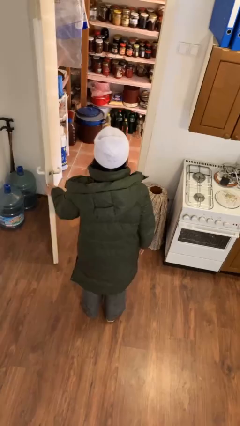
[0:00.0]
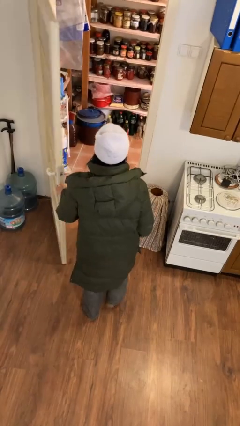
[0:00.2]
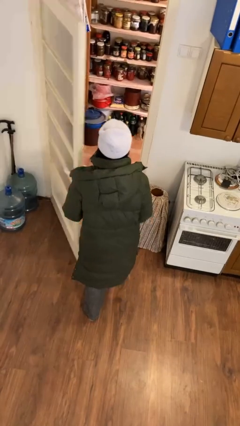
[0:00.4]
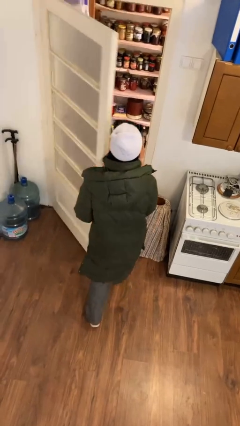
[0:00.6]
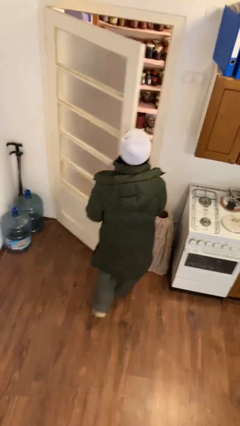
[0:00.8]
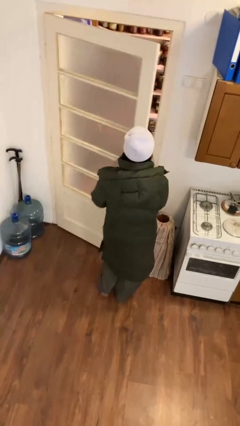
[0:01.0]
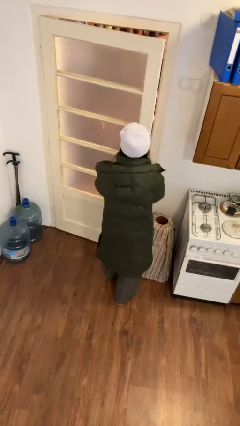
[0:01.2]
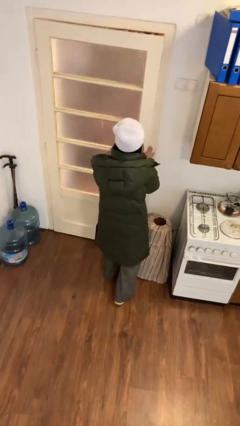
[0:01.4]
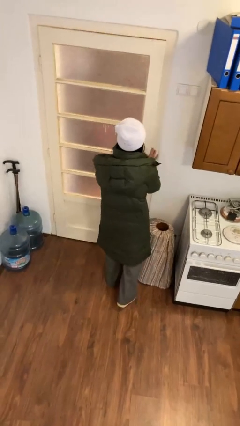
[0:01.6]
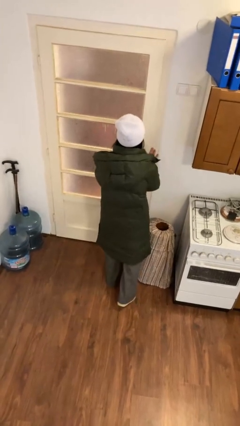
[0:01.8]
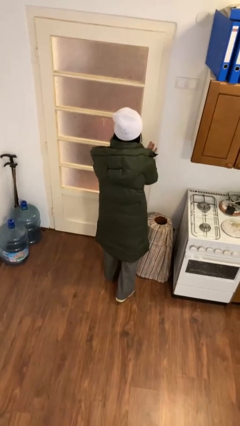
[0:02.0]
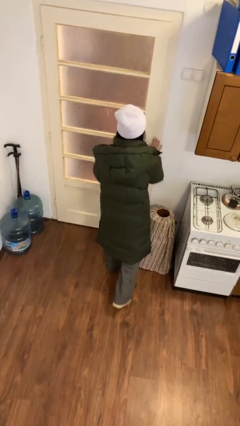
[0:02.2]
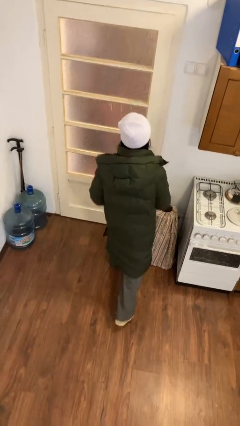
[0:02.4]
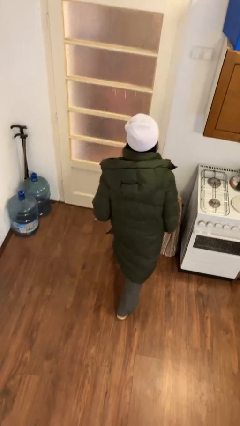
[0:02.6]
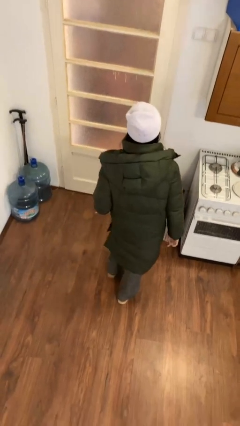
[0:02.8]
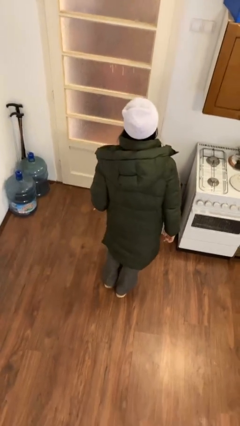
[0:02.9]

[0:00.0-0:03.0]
person closes facility door

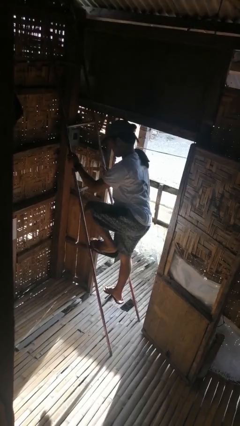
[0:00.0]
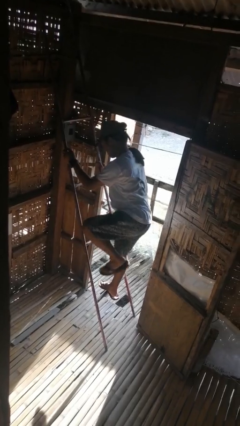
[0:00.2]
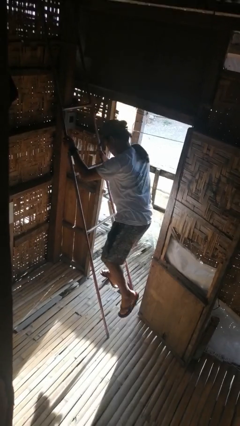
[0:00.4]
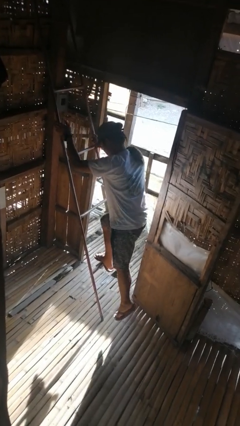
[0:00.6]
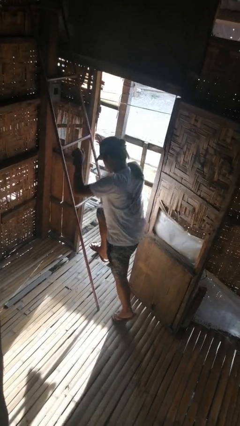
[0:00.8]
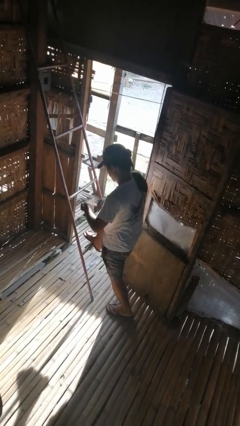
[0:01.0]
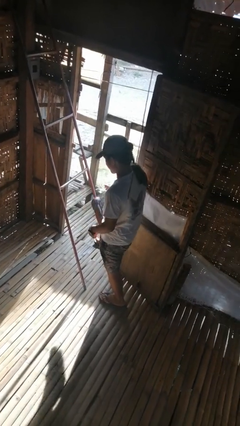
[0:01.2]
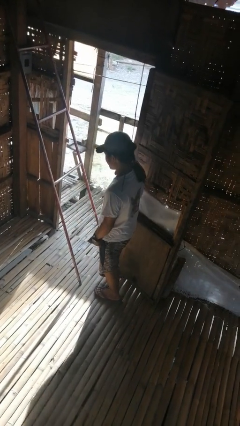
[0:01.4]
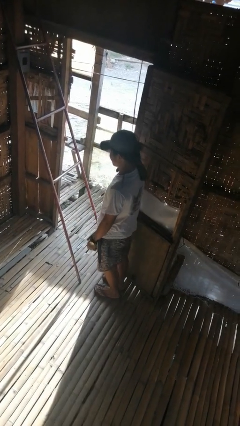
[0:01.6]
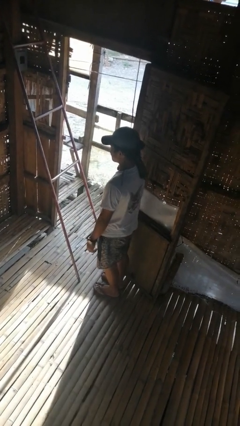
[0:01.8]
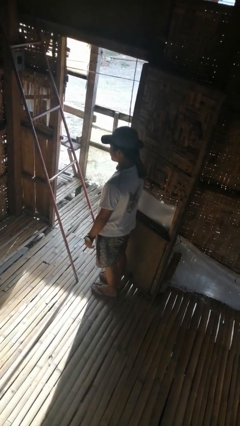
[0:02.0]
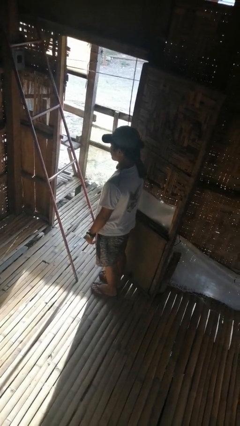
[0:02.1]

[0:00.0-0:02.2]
person climbs down ladder

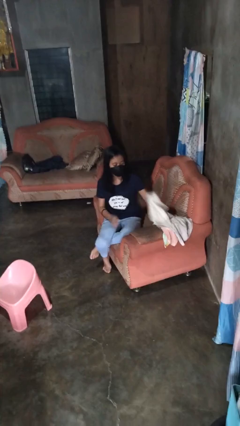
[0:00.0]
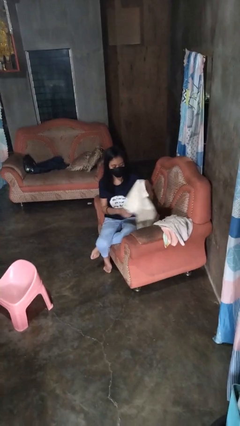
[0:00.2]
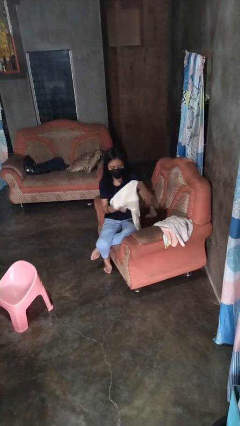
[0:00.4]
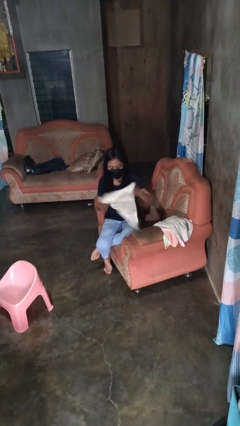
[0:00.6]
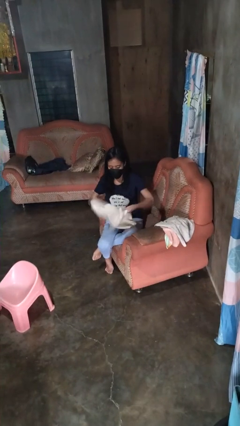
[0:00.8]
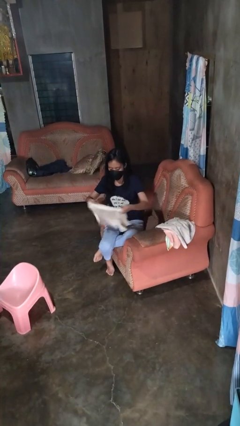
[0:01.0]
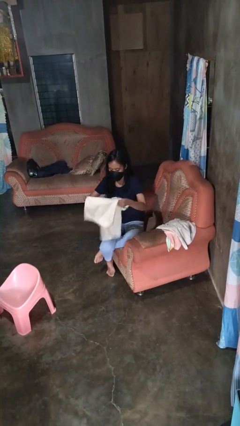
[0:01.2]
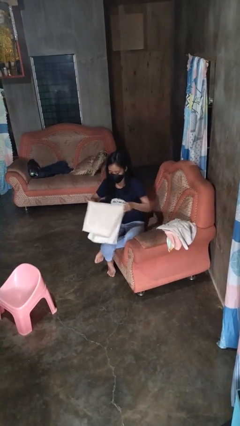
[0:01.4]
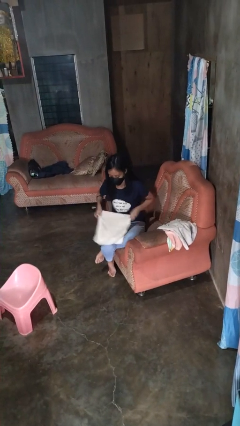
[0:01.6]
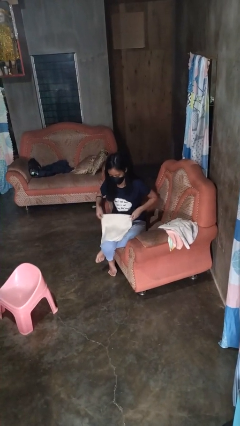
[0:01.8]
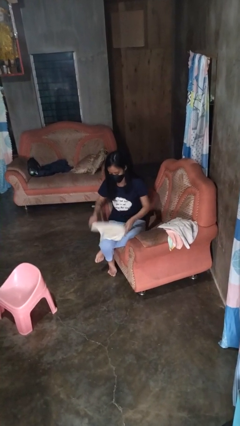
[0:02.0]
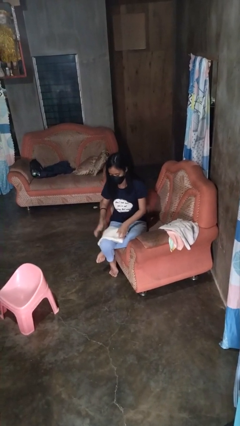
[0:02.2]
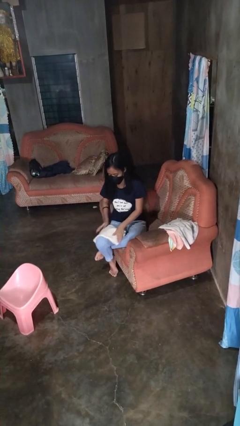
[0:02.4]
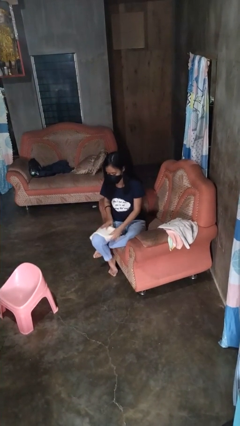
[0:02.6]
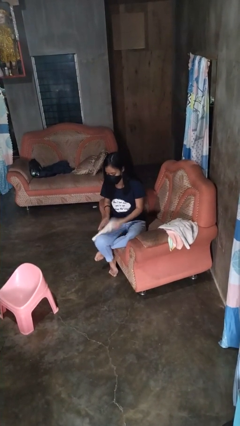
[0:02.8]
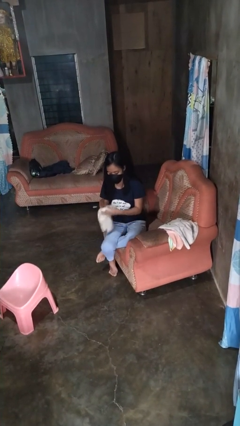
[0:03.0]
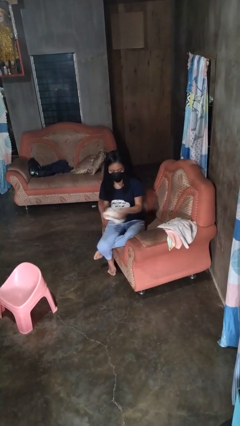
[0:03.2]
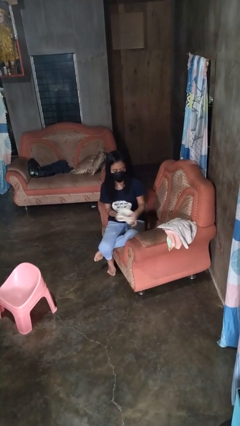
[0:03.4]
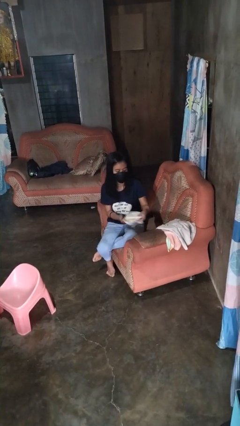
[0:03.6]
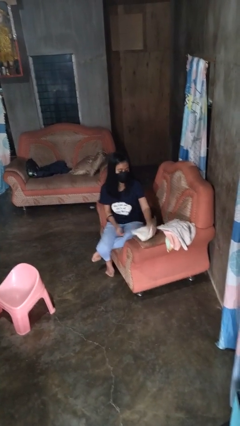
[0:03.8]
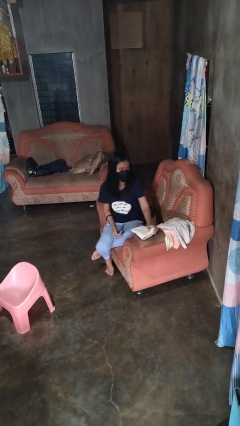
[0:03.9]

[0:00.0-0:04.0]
person folds towel

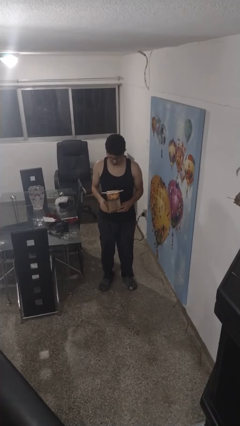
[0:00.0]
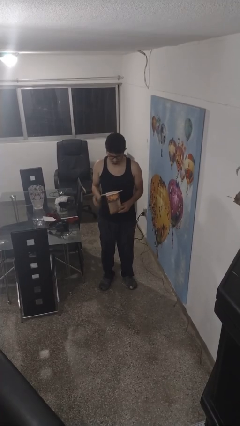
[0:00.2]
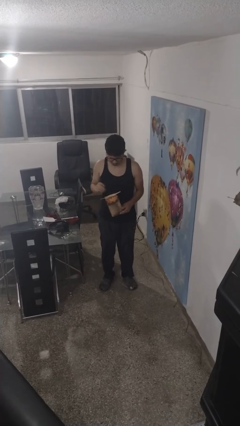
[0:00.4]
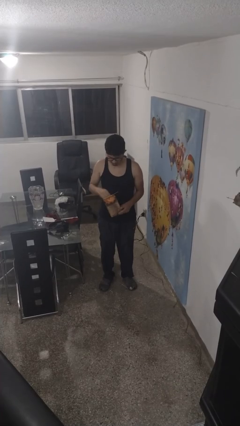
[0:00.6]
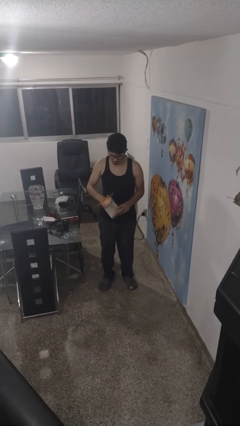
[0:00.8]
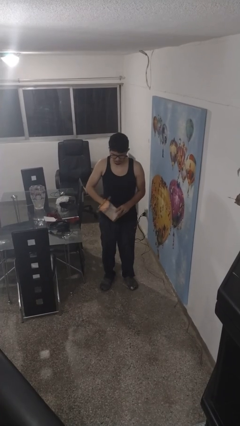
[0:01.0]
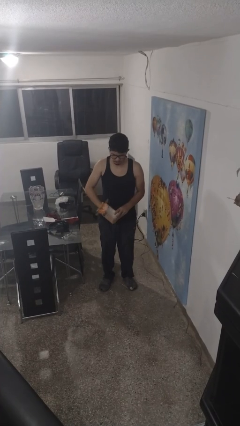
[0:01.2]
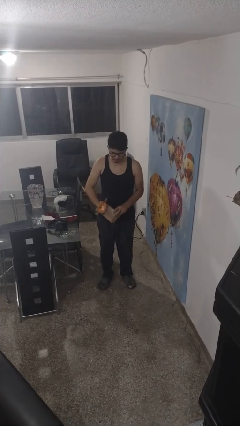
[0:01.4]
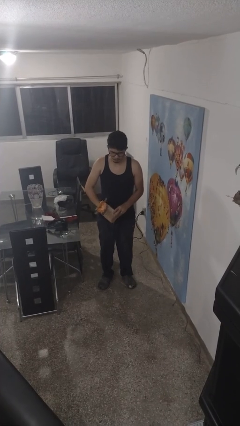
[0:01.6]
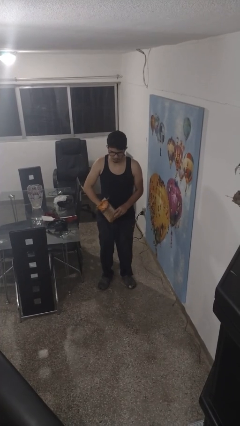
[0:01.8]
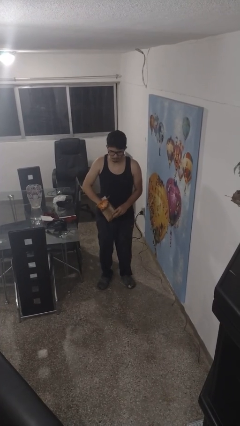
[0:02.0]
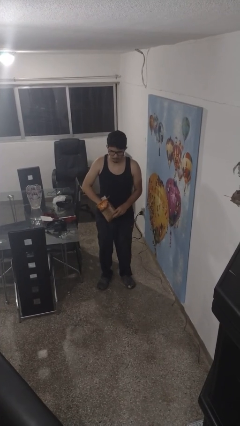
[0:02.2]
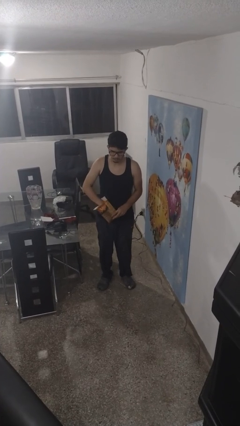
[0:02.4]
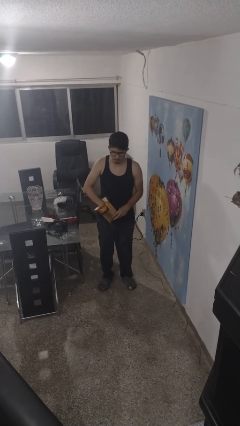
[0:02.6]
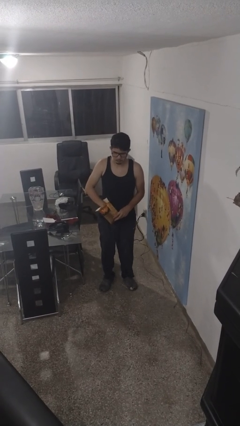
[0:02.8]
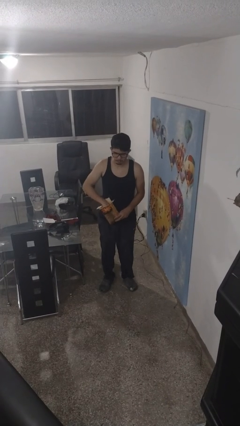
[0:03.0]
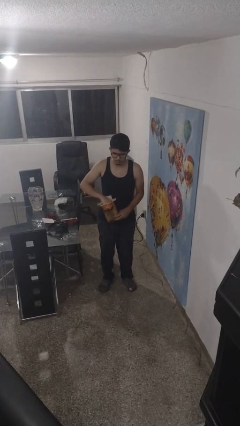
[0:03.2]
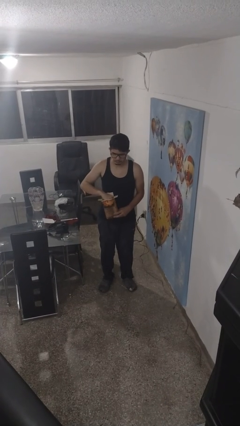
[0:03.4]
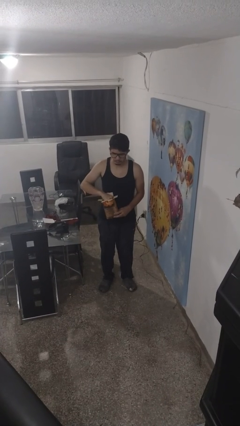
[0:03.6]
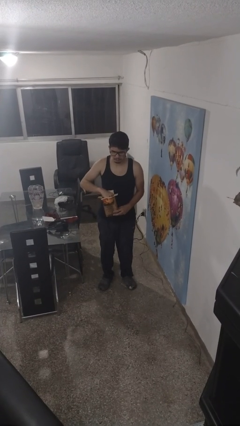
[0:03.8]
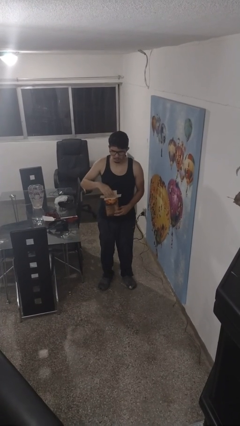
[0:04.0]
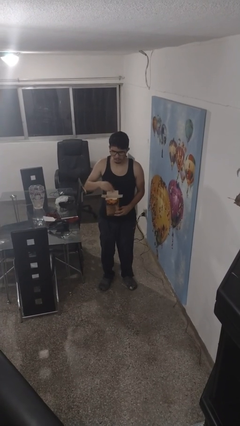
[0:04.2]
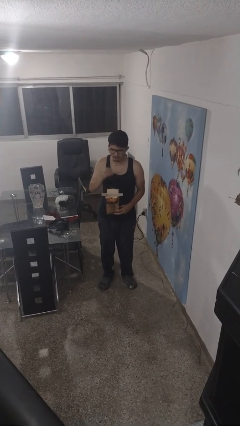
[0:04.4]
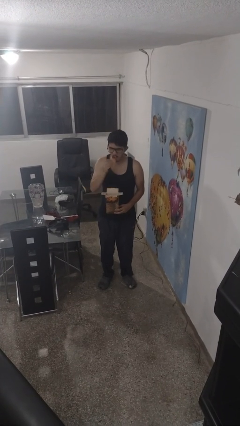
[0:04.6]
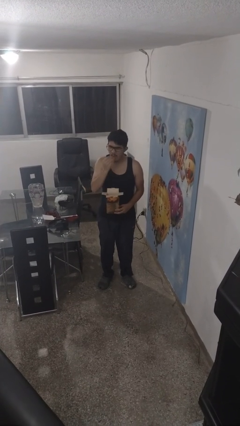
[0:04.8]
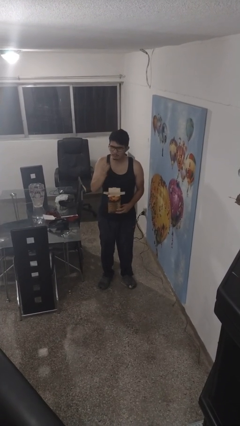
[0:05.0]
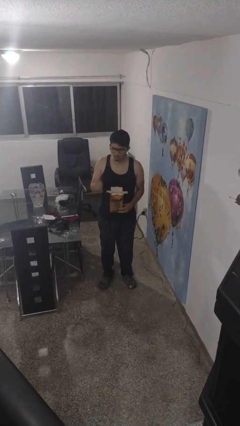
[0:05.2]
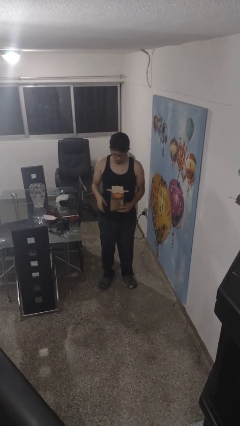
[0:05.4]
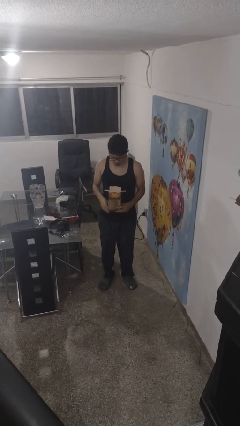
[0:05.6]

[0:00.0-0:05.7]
person eats snack from bag

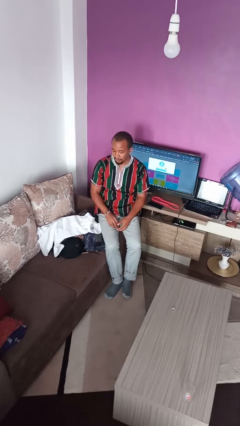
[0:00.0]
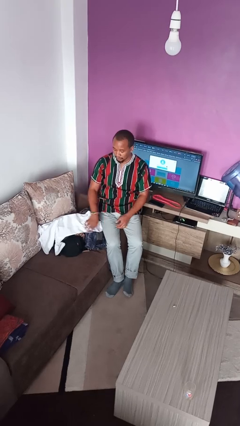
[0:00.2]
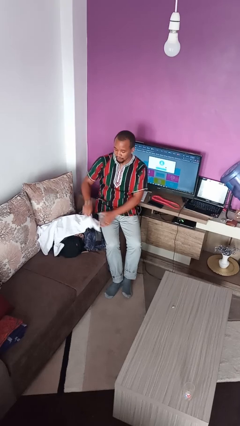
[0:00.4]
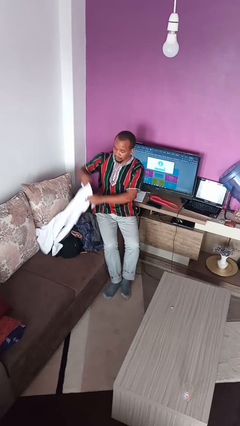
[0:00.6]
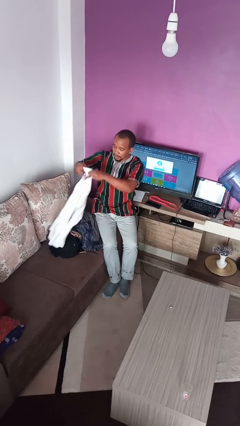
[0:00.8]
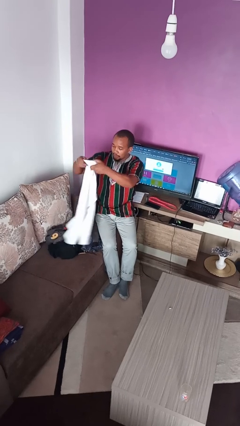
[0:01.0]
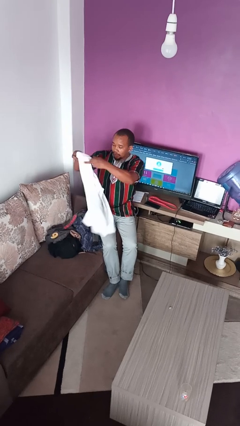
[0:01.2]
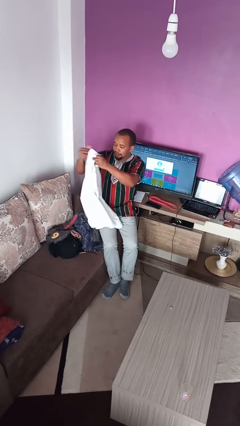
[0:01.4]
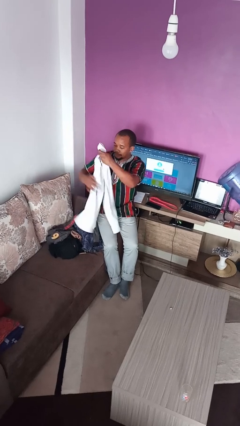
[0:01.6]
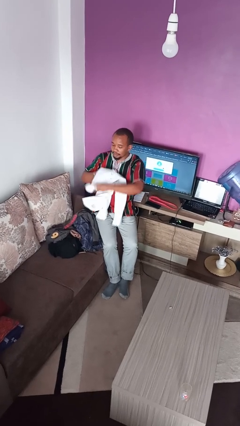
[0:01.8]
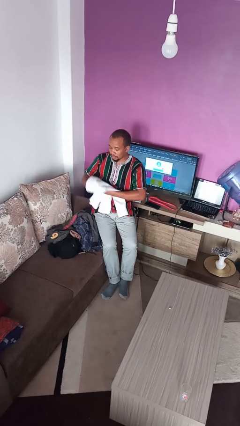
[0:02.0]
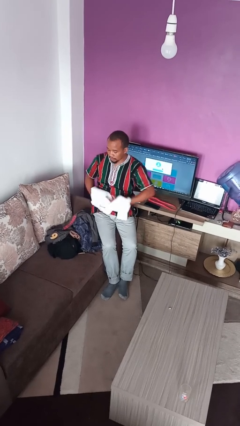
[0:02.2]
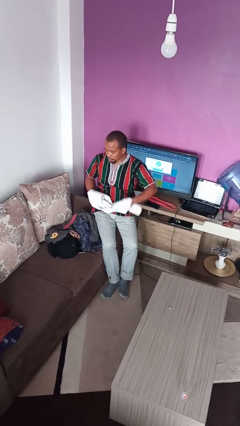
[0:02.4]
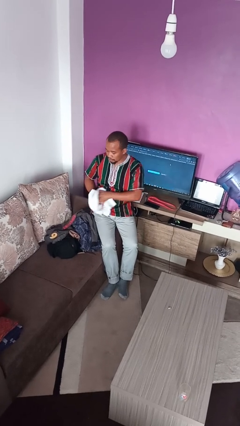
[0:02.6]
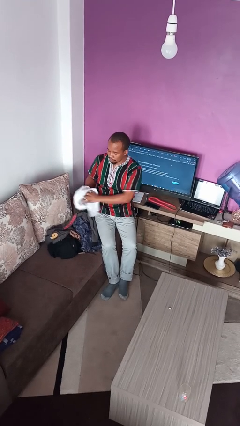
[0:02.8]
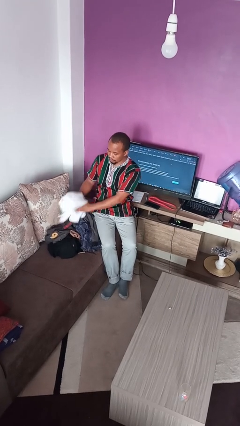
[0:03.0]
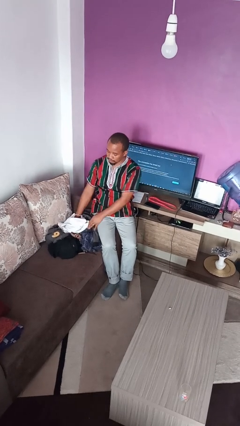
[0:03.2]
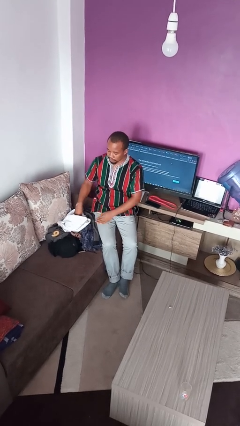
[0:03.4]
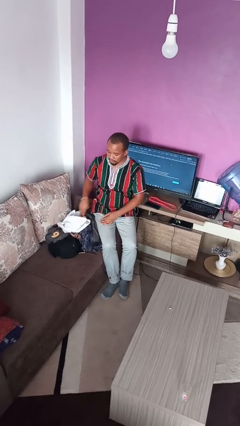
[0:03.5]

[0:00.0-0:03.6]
person folds shirt
